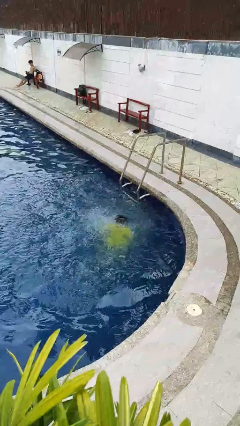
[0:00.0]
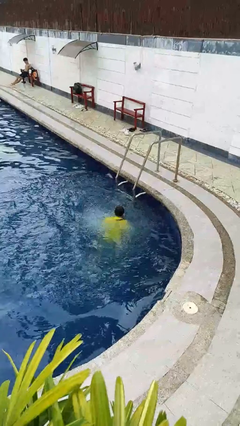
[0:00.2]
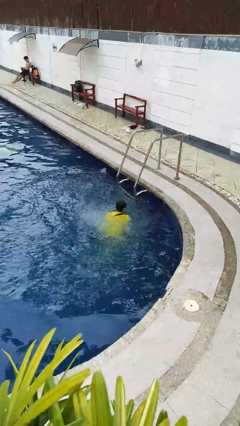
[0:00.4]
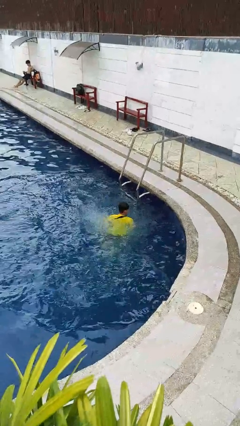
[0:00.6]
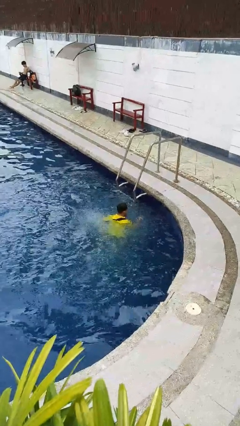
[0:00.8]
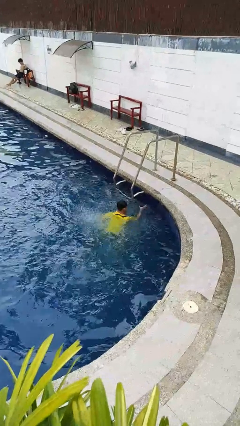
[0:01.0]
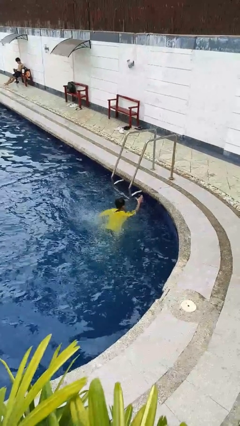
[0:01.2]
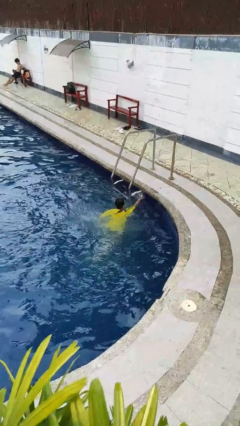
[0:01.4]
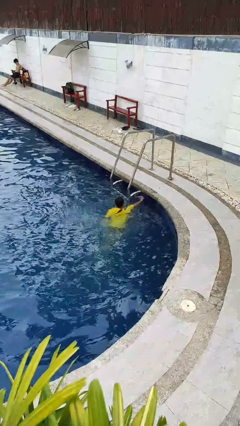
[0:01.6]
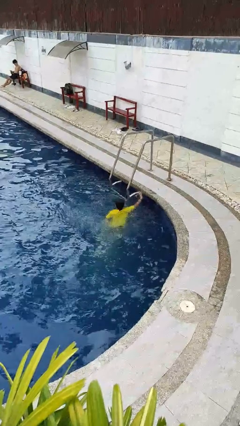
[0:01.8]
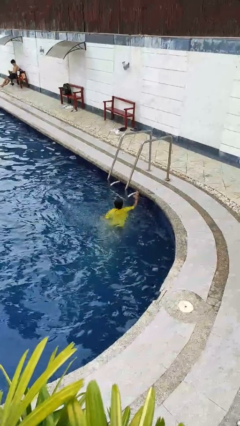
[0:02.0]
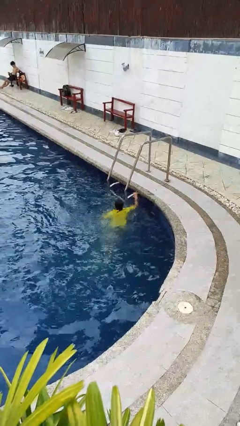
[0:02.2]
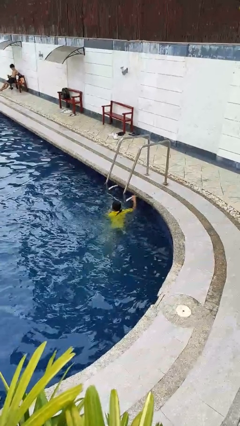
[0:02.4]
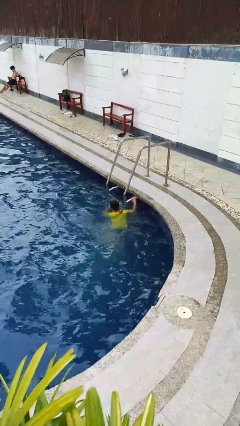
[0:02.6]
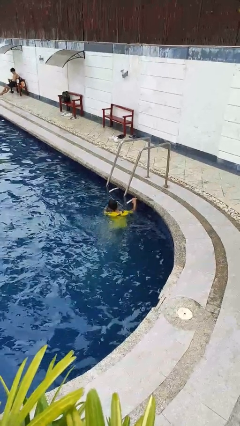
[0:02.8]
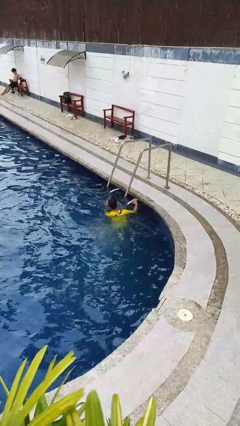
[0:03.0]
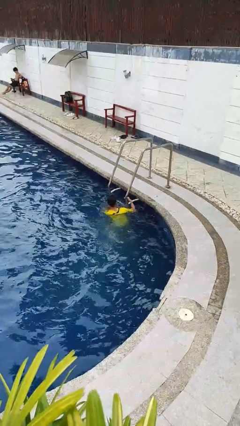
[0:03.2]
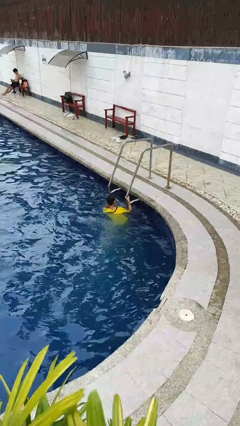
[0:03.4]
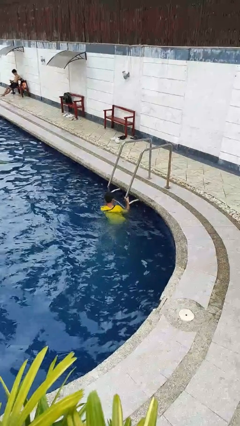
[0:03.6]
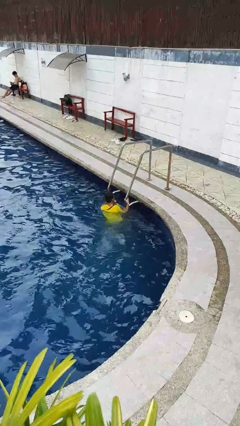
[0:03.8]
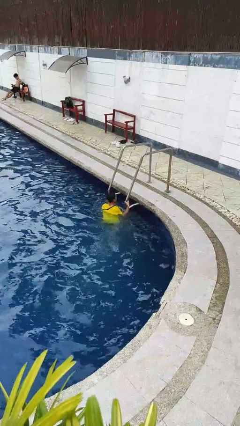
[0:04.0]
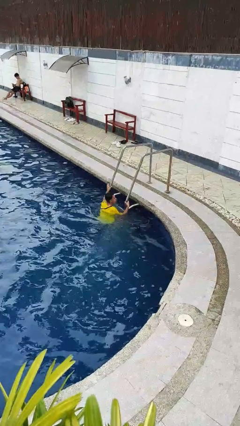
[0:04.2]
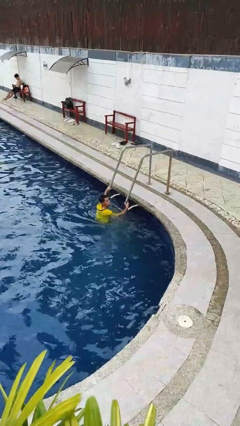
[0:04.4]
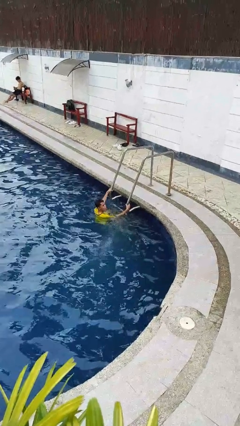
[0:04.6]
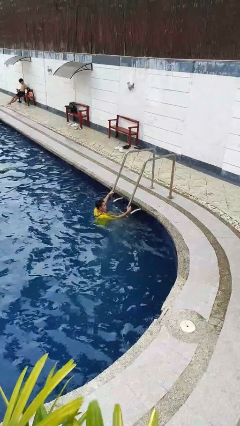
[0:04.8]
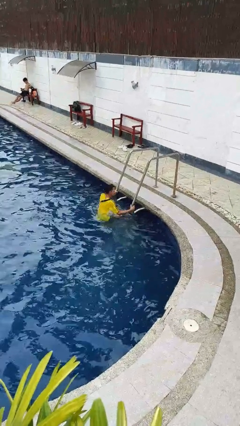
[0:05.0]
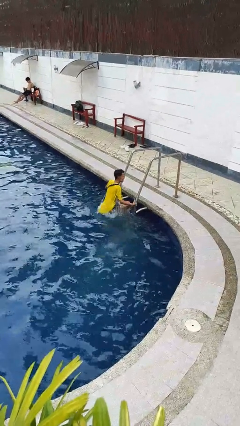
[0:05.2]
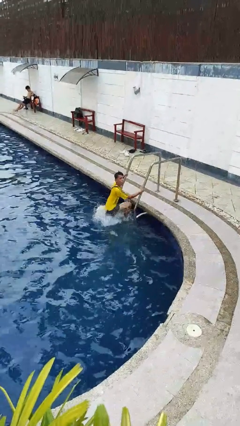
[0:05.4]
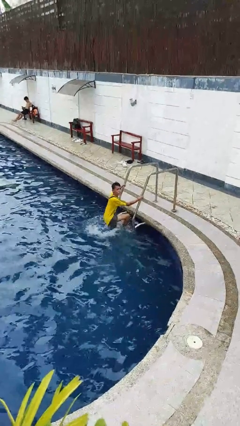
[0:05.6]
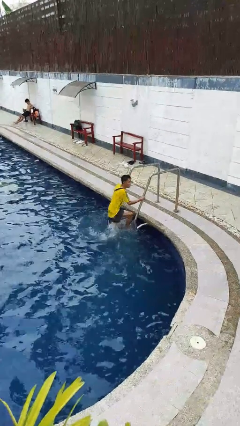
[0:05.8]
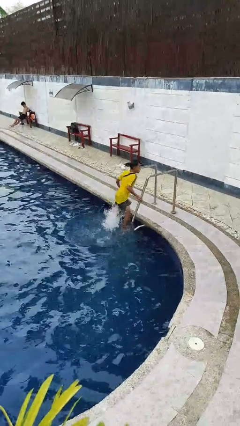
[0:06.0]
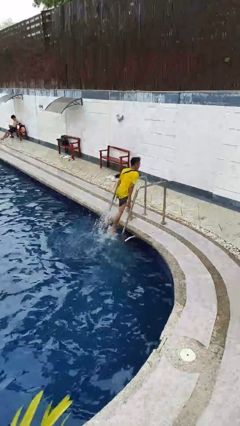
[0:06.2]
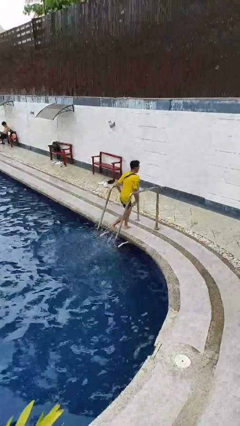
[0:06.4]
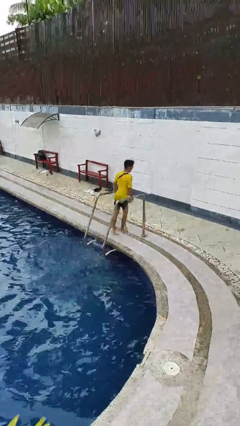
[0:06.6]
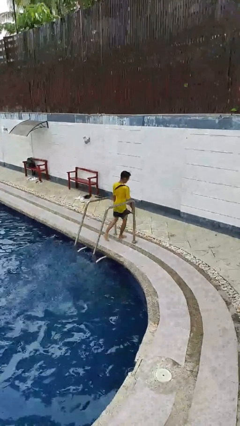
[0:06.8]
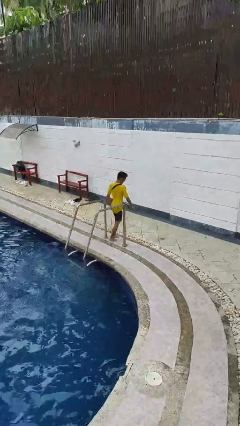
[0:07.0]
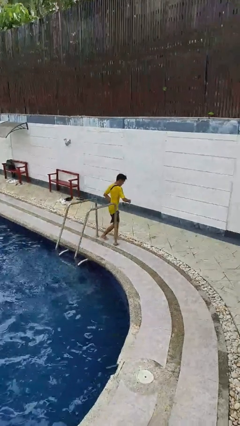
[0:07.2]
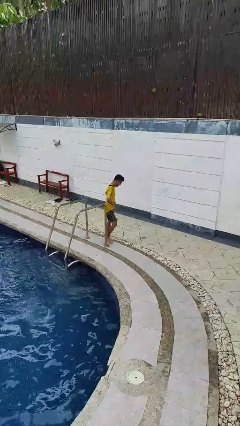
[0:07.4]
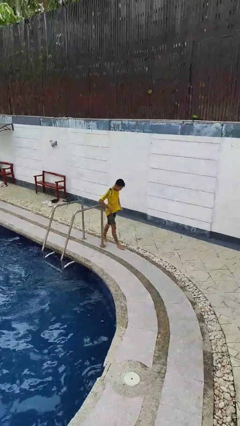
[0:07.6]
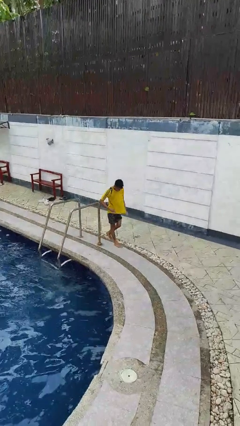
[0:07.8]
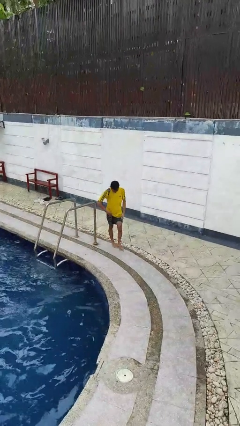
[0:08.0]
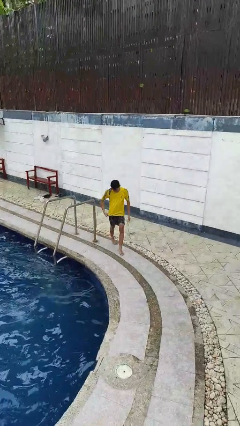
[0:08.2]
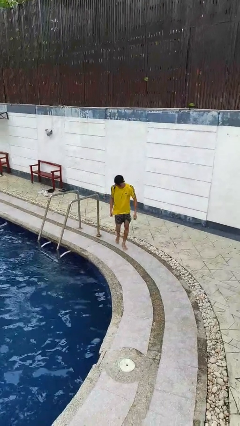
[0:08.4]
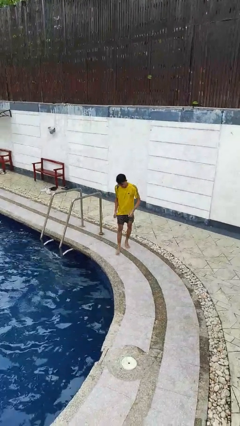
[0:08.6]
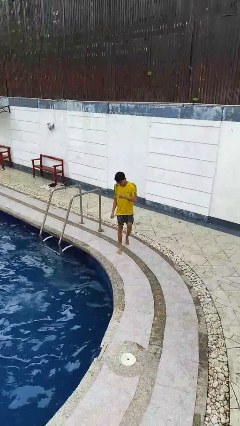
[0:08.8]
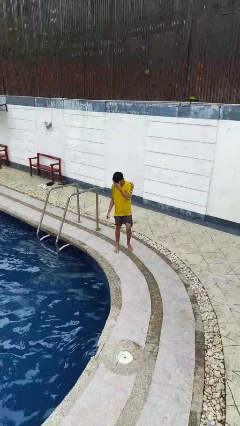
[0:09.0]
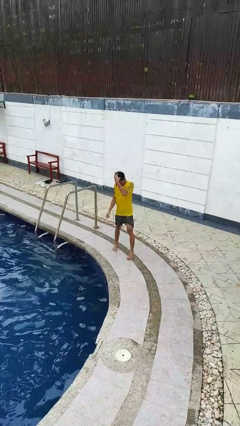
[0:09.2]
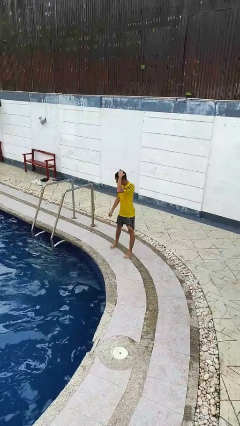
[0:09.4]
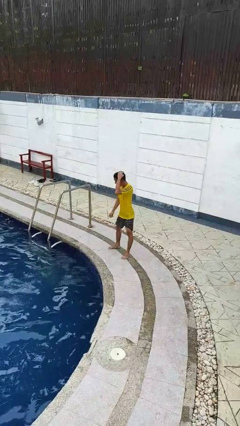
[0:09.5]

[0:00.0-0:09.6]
person exits pool

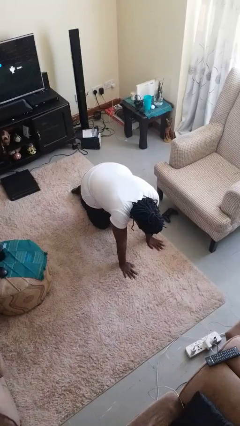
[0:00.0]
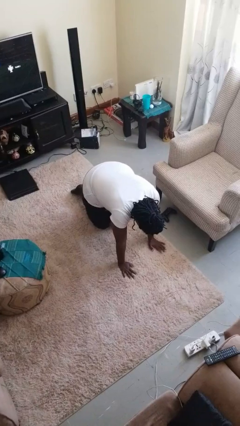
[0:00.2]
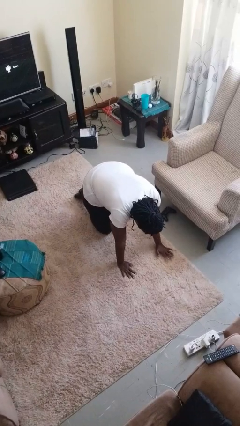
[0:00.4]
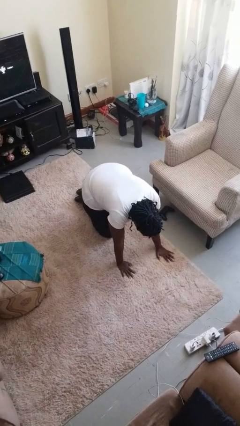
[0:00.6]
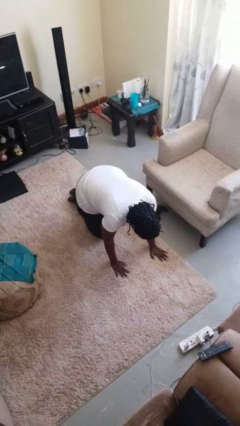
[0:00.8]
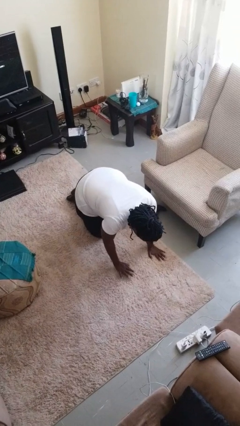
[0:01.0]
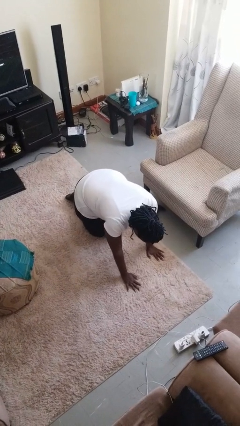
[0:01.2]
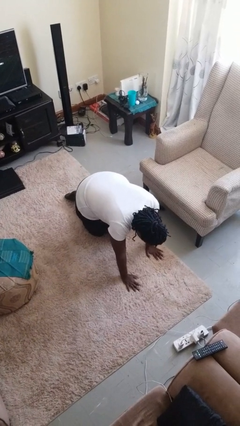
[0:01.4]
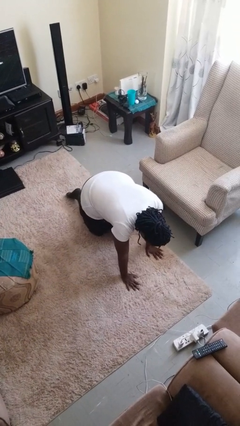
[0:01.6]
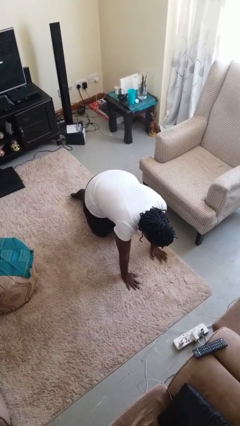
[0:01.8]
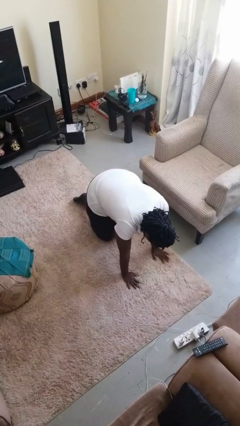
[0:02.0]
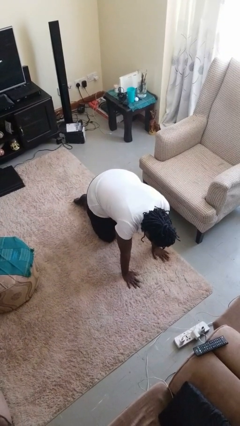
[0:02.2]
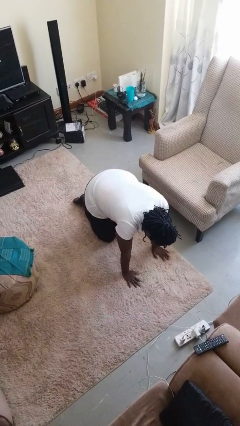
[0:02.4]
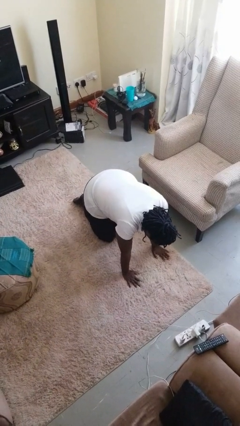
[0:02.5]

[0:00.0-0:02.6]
person crawls

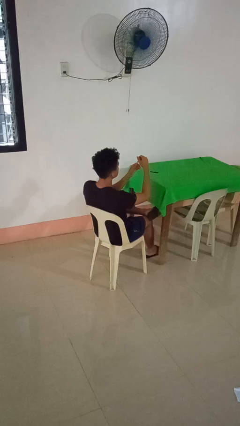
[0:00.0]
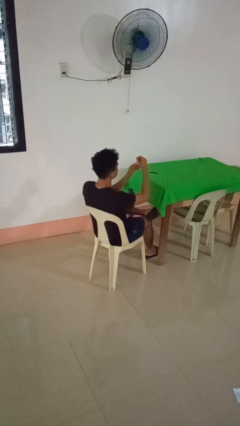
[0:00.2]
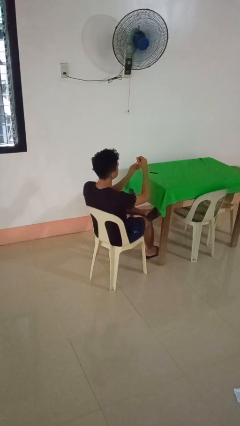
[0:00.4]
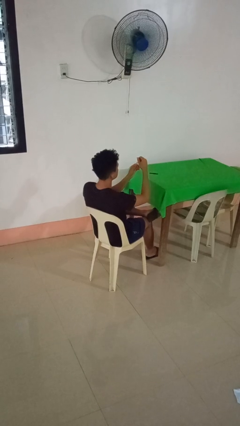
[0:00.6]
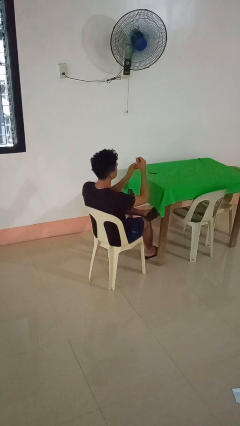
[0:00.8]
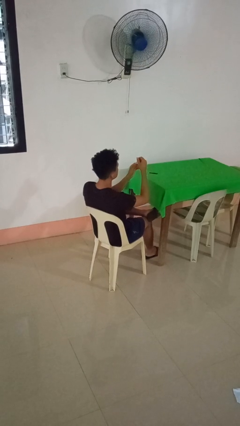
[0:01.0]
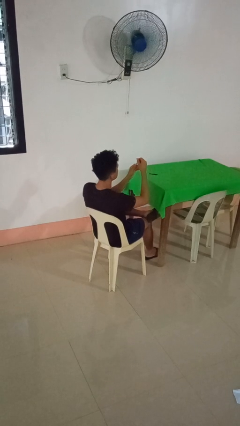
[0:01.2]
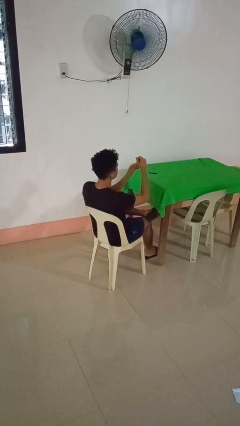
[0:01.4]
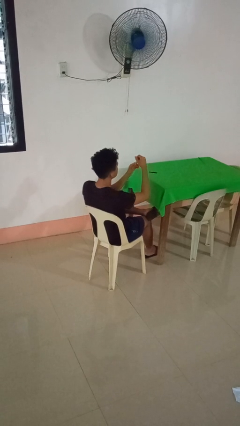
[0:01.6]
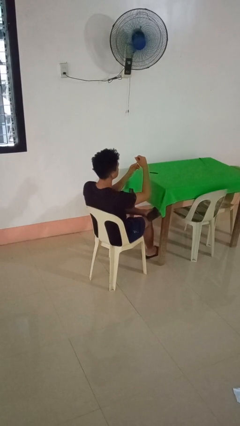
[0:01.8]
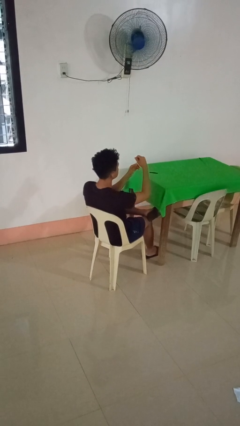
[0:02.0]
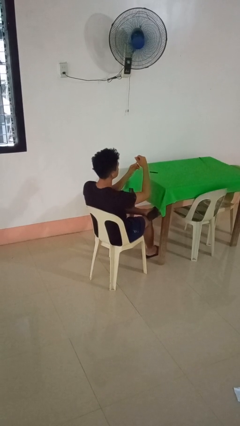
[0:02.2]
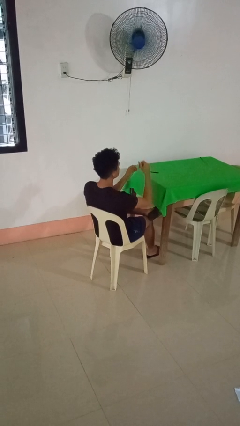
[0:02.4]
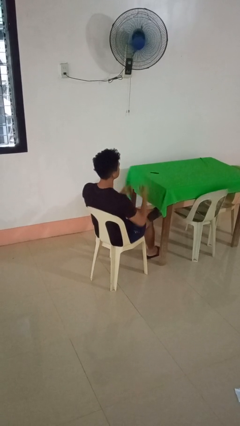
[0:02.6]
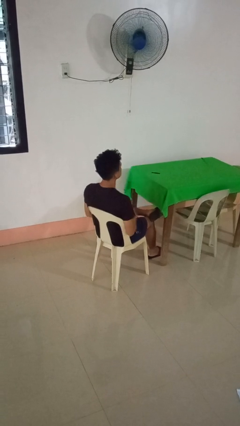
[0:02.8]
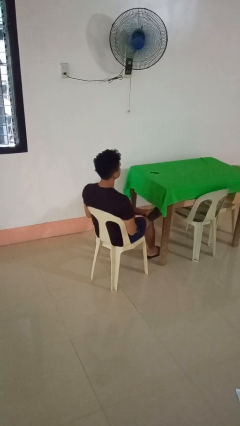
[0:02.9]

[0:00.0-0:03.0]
person clips fingernails

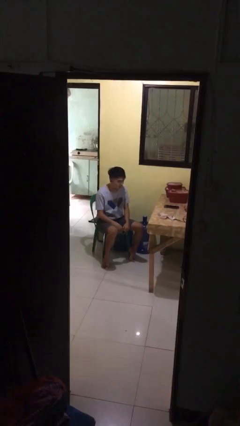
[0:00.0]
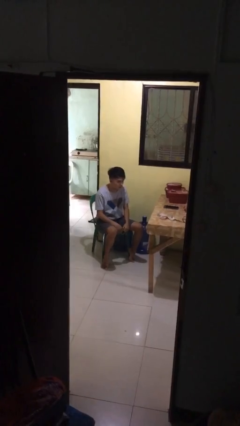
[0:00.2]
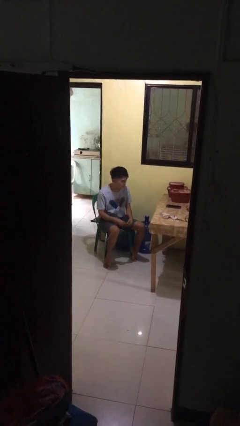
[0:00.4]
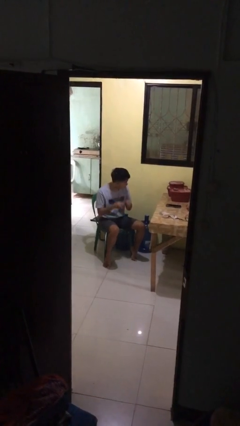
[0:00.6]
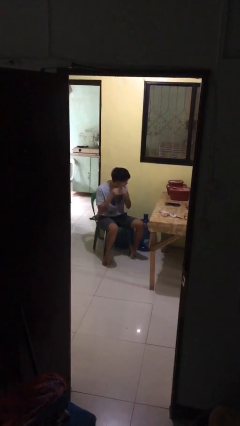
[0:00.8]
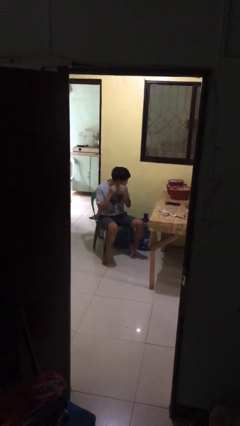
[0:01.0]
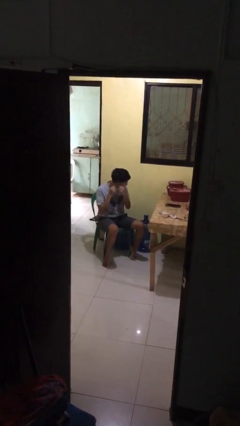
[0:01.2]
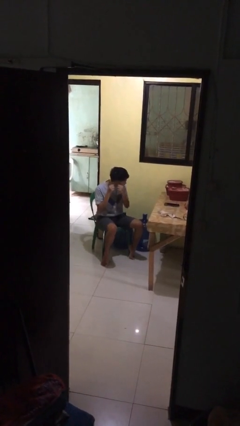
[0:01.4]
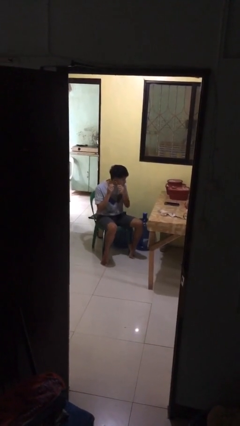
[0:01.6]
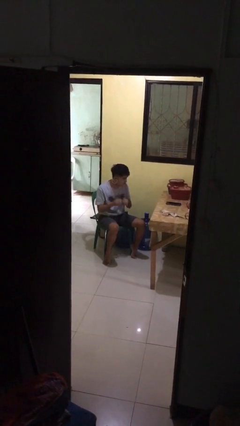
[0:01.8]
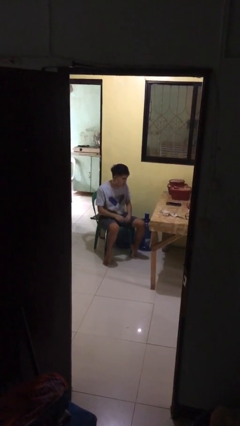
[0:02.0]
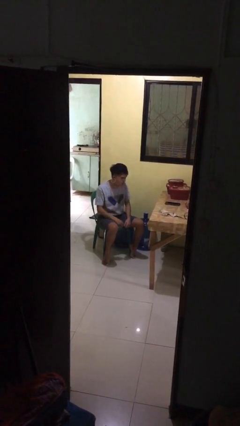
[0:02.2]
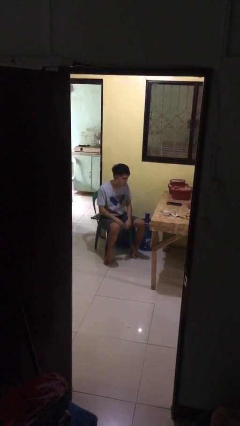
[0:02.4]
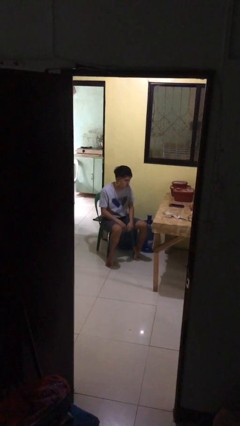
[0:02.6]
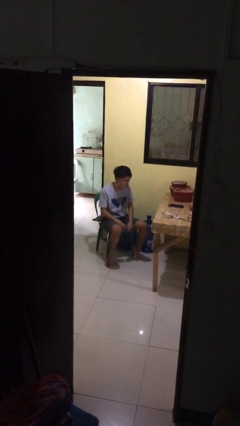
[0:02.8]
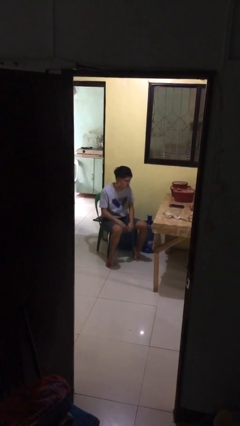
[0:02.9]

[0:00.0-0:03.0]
person puts on earrings
